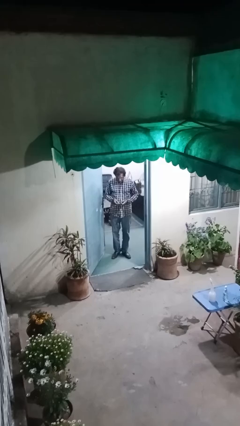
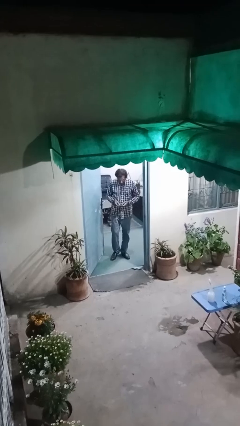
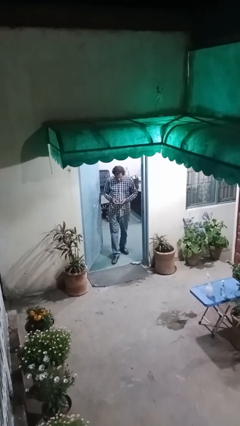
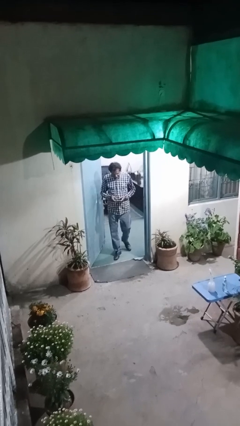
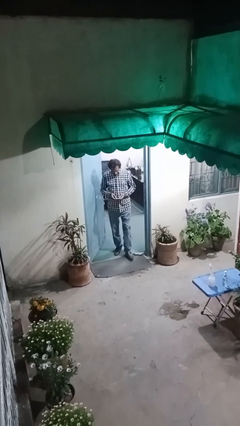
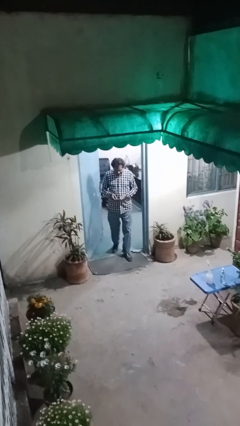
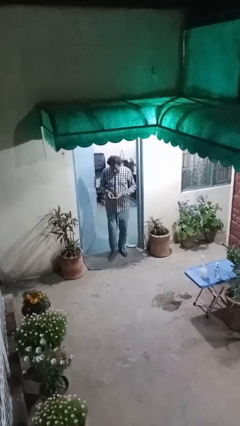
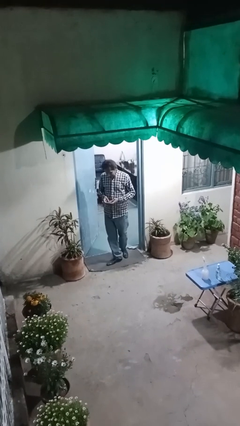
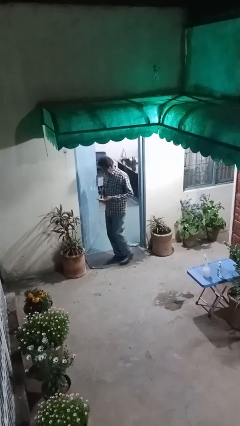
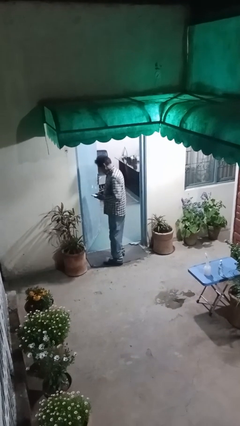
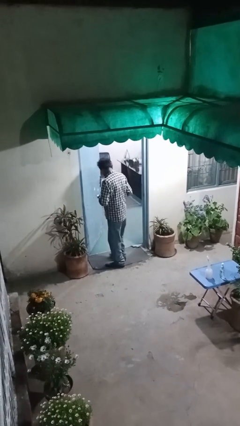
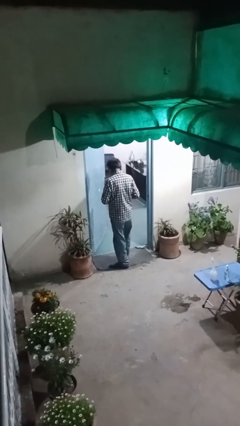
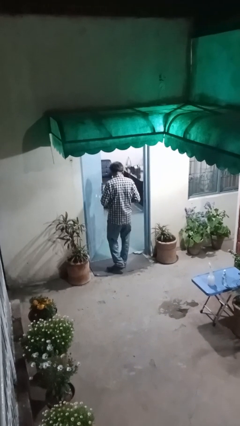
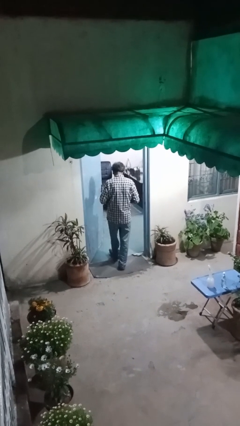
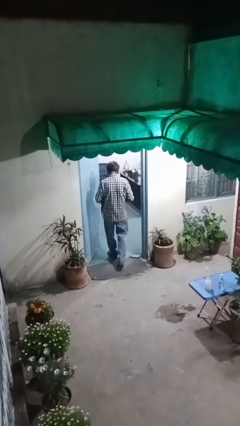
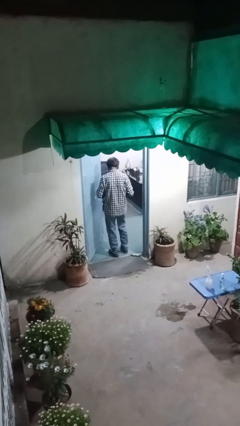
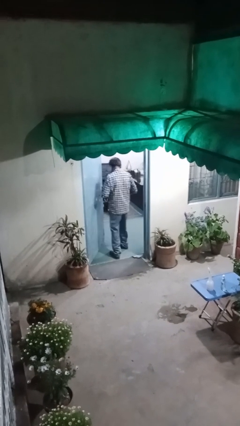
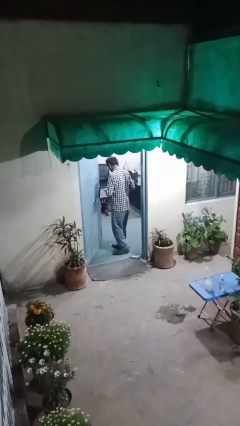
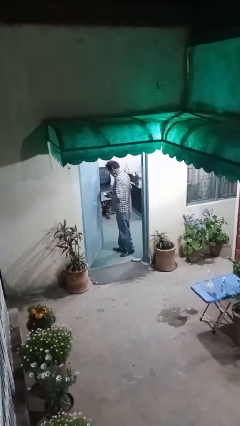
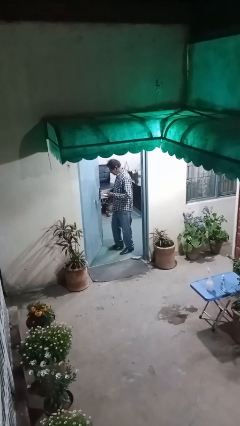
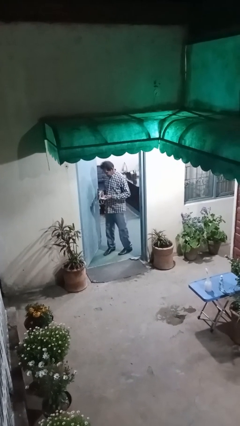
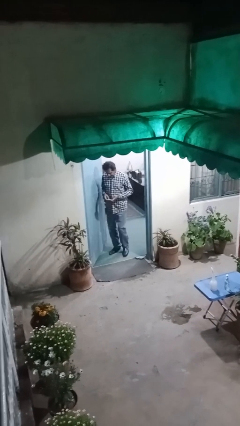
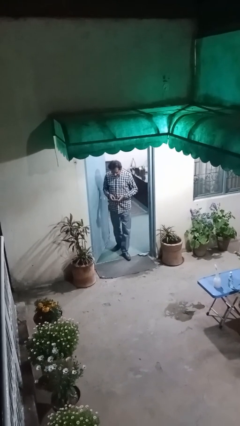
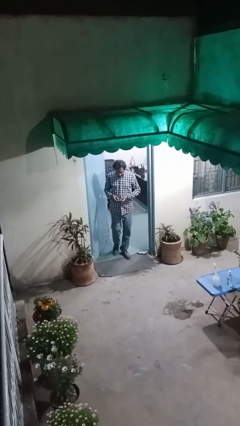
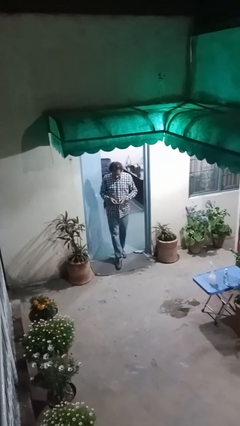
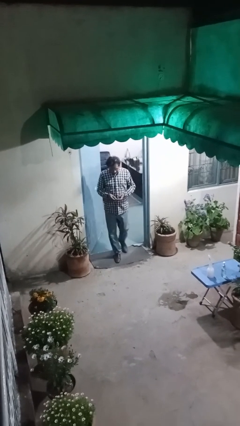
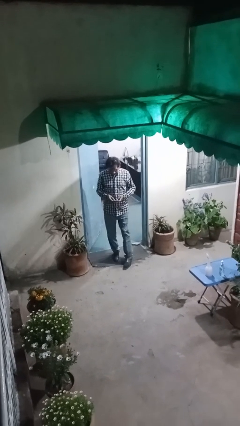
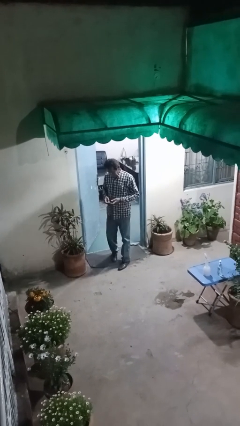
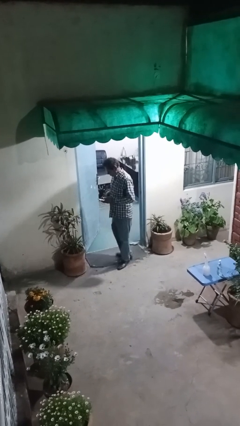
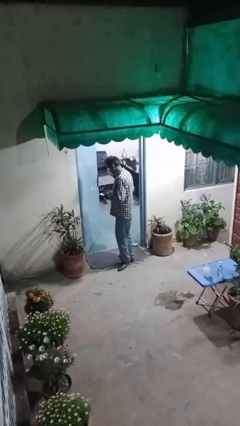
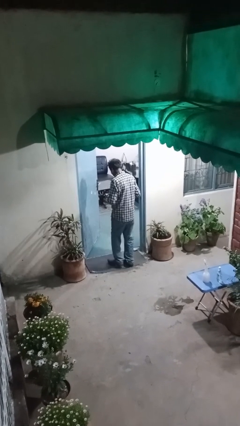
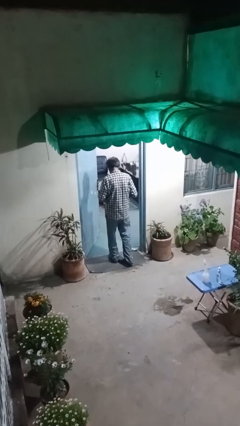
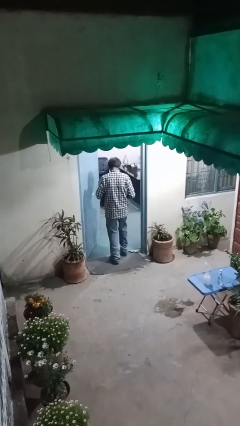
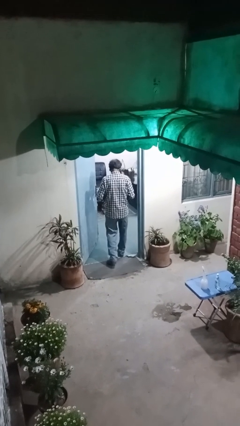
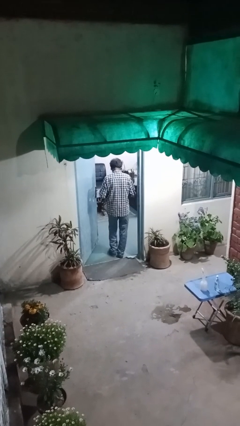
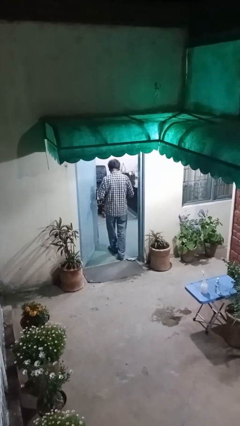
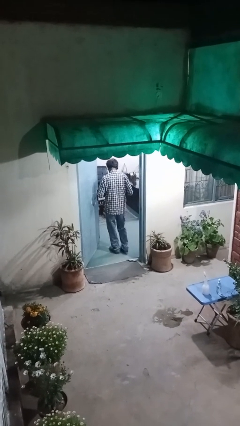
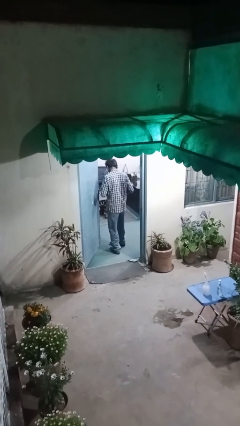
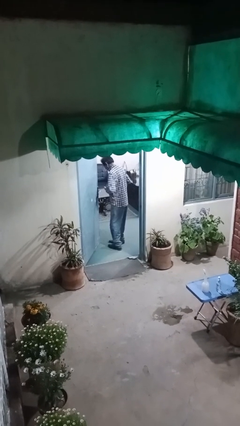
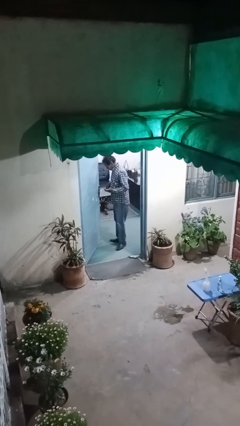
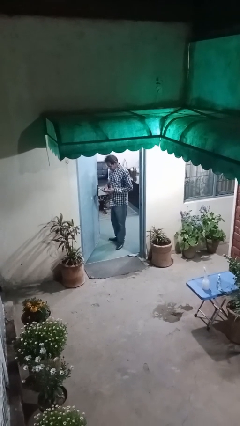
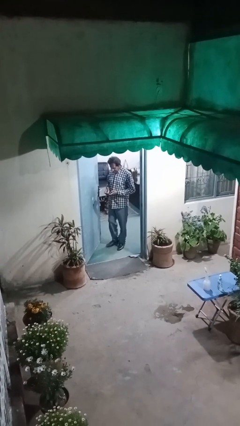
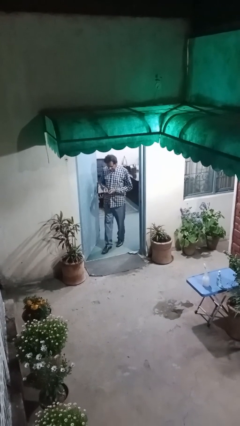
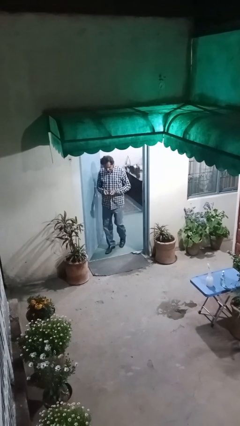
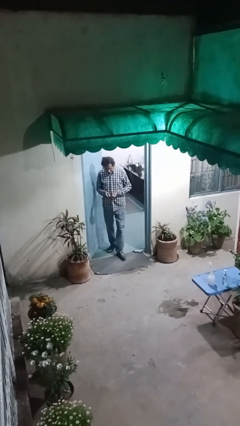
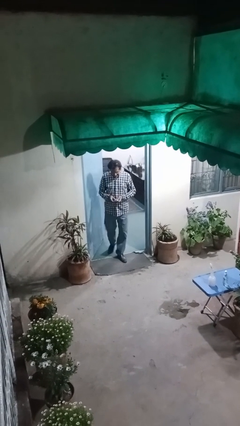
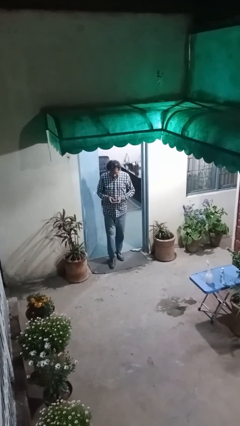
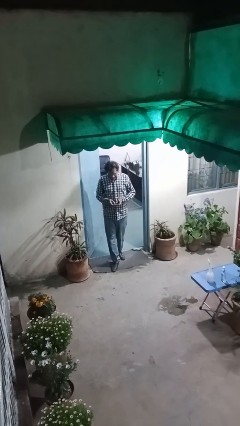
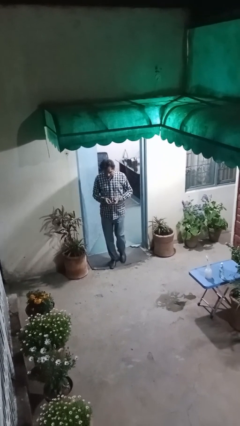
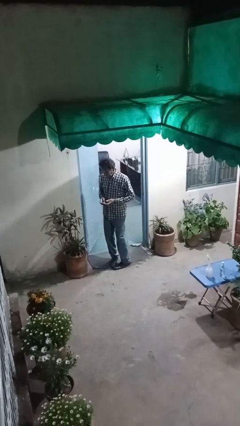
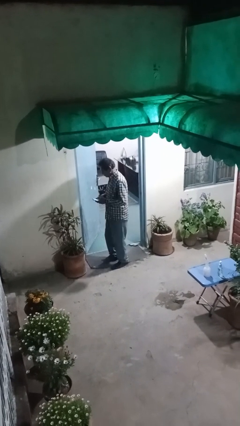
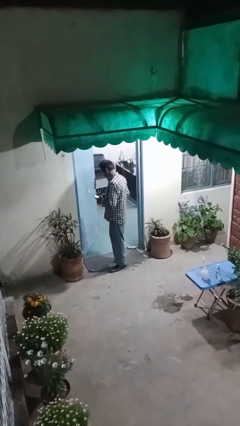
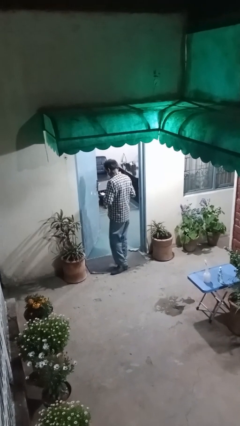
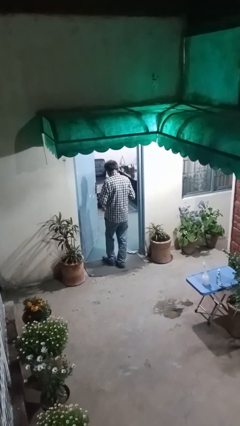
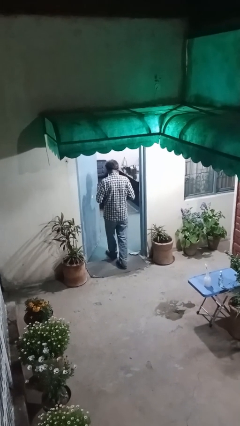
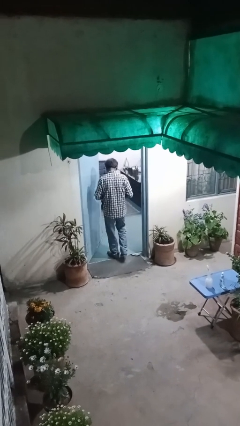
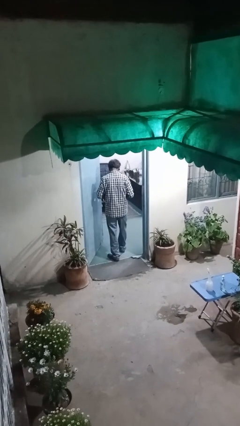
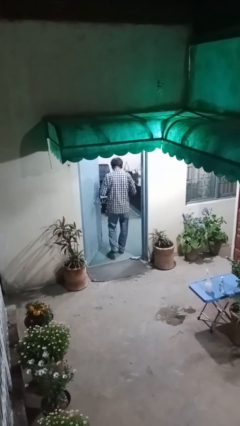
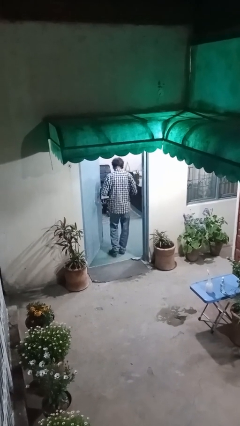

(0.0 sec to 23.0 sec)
person texts on phone

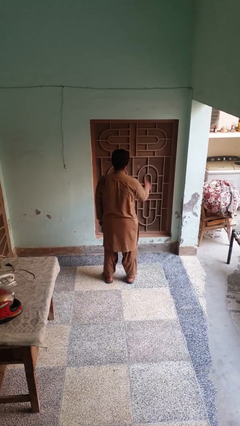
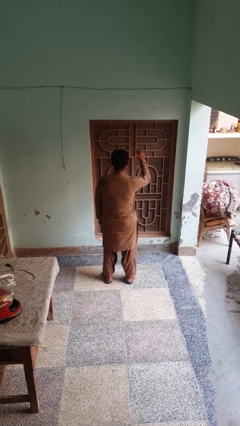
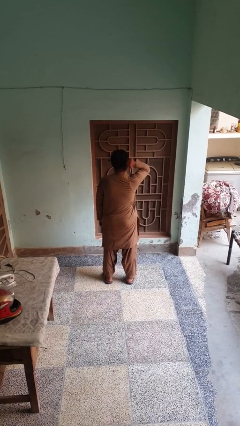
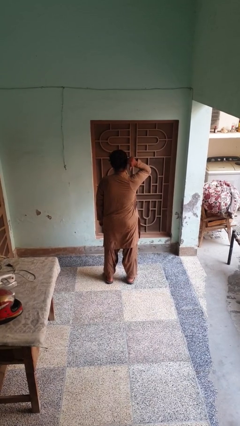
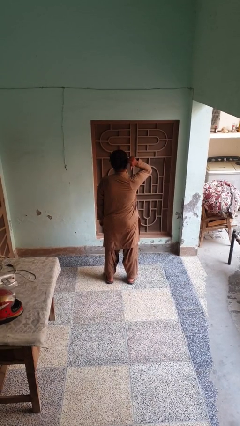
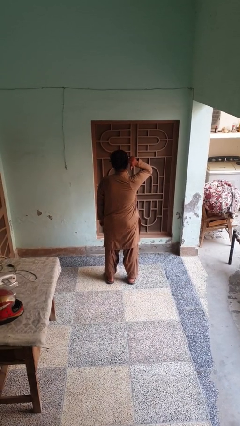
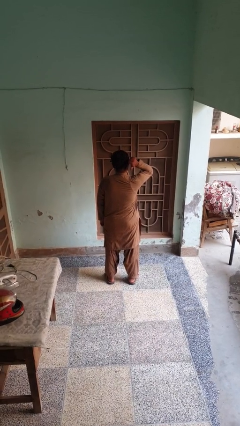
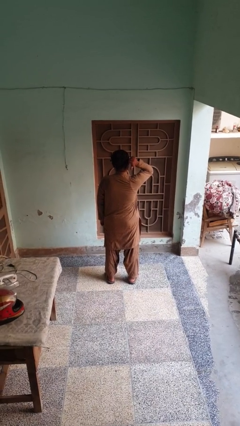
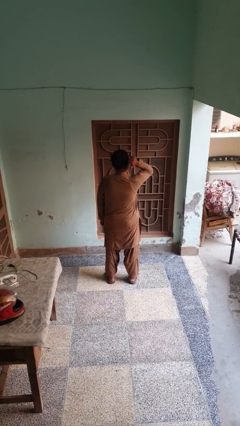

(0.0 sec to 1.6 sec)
person gestures behind me

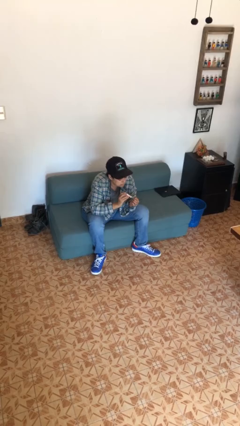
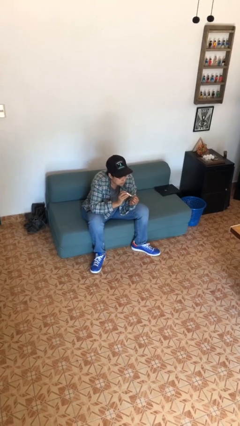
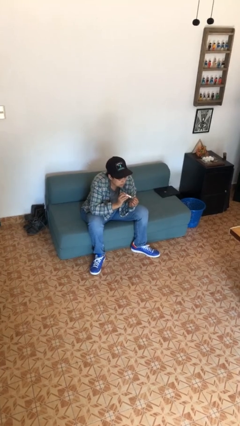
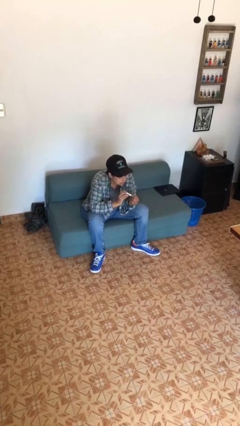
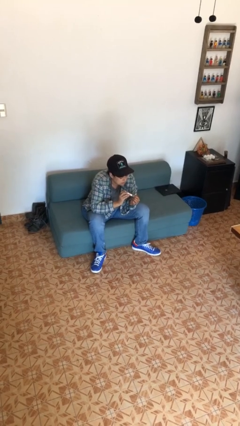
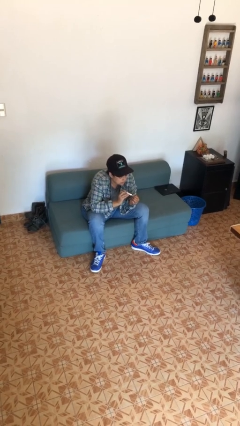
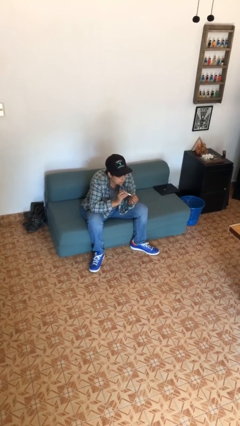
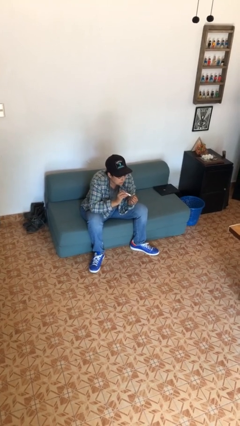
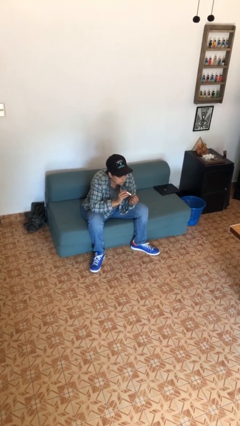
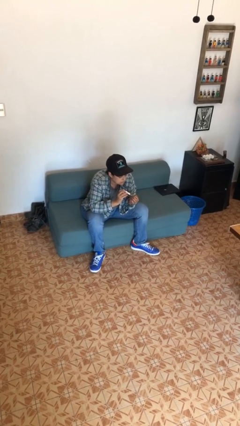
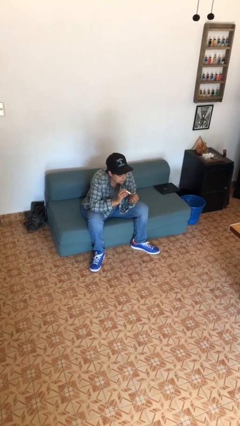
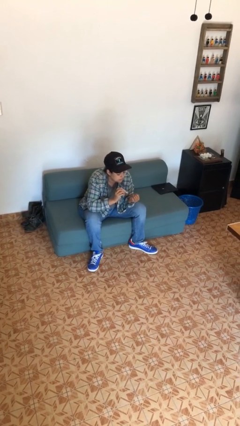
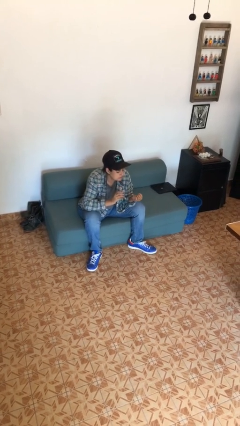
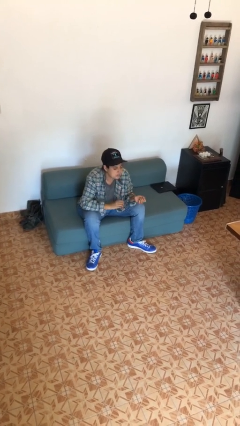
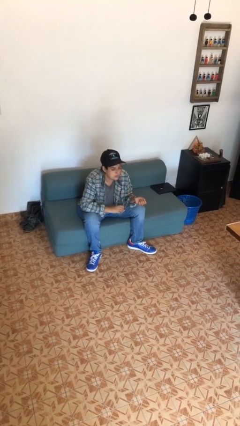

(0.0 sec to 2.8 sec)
person clips fingernails

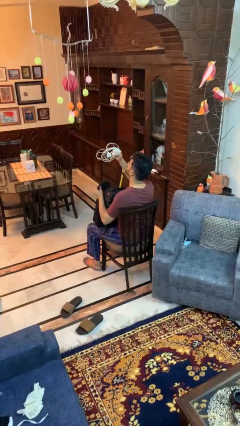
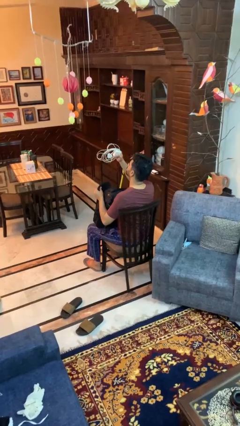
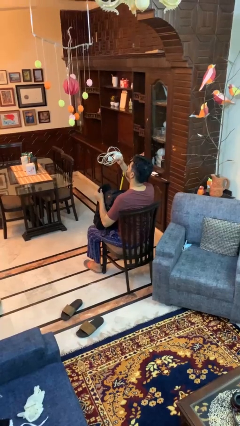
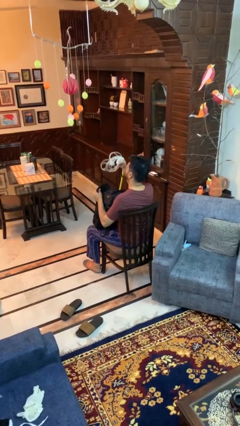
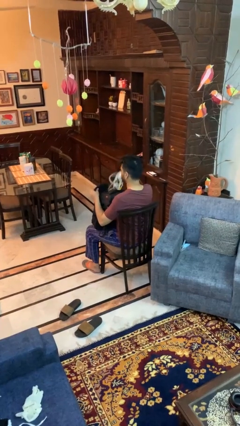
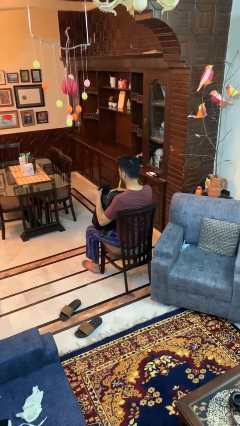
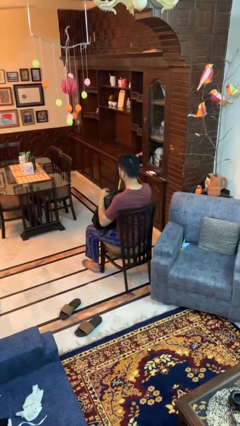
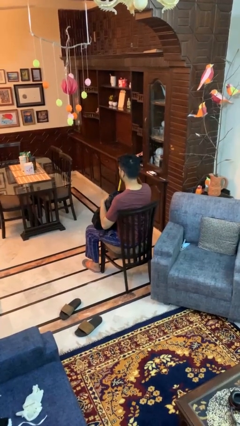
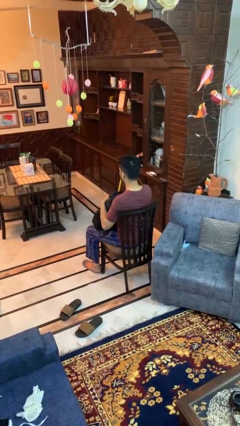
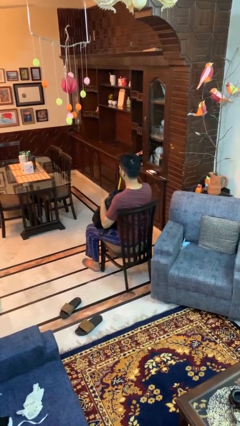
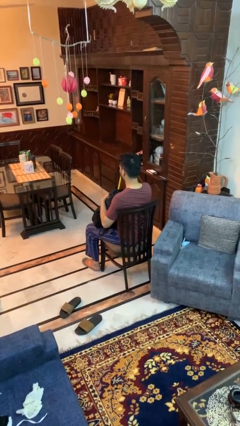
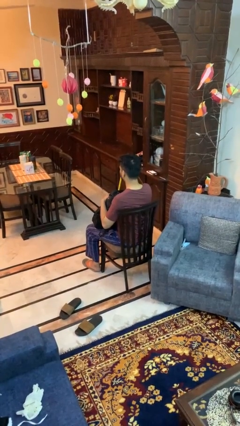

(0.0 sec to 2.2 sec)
person puts object into backpack
